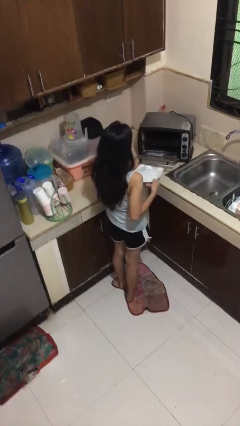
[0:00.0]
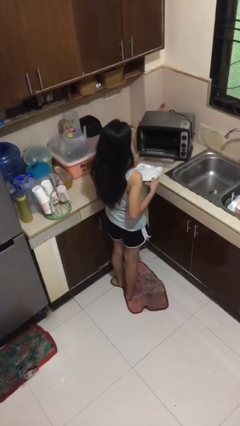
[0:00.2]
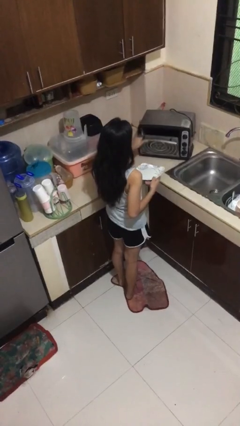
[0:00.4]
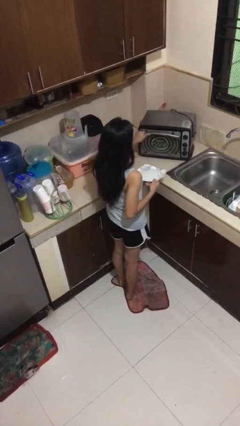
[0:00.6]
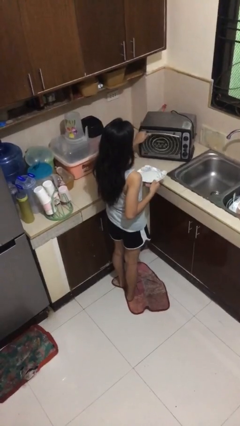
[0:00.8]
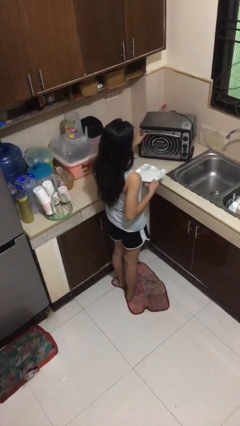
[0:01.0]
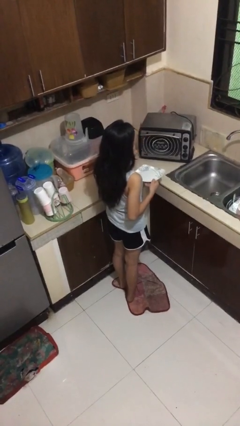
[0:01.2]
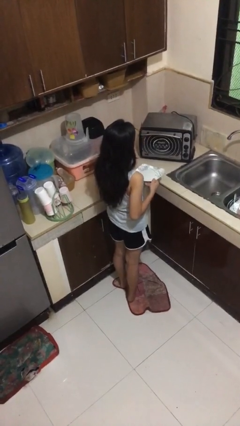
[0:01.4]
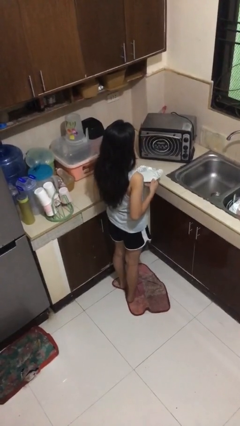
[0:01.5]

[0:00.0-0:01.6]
person closes microwave

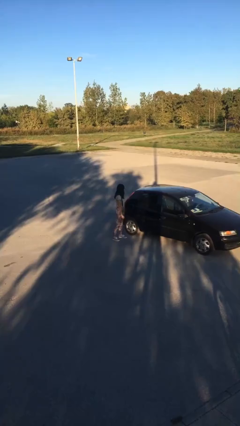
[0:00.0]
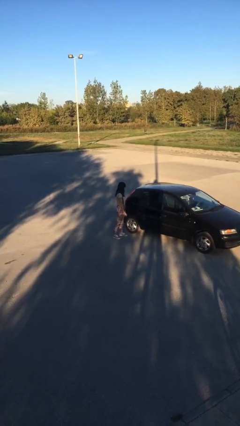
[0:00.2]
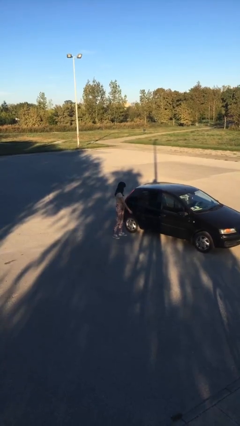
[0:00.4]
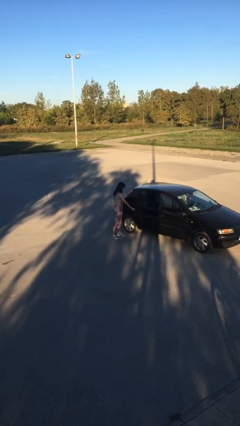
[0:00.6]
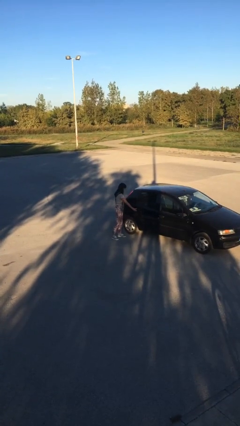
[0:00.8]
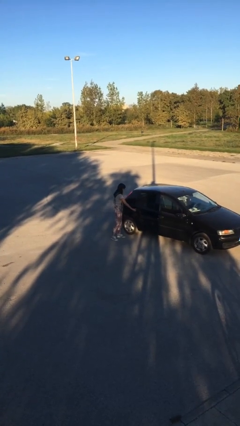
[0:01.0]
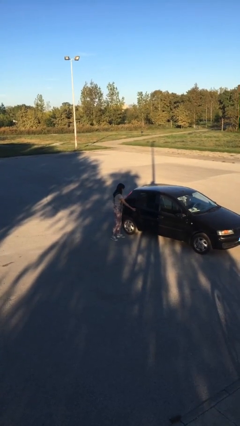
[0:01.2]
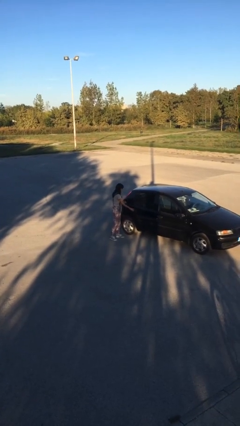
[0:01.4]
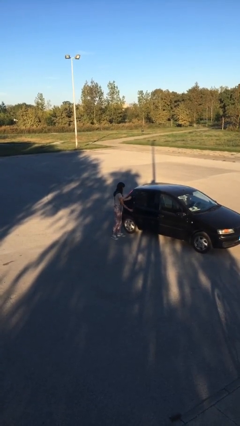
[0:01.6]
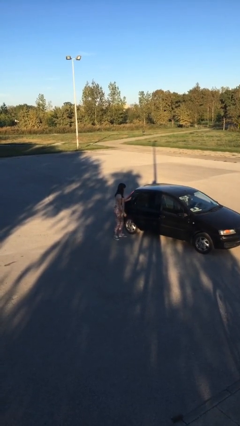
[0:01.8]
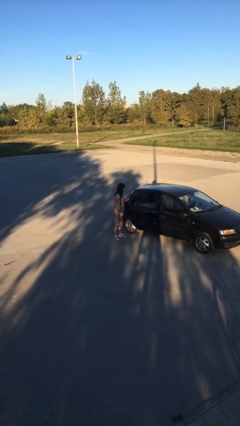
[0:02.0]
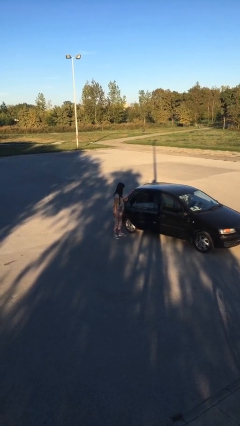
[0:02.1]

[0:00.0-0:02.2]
person opens car door

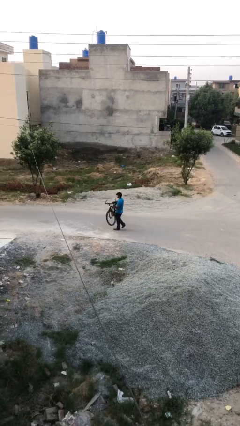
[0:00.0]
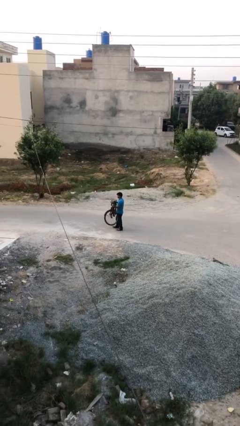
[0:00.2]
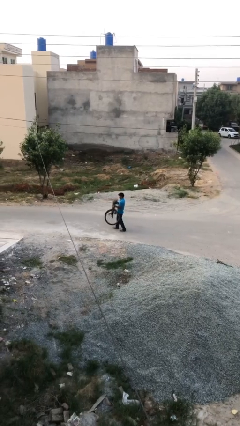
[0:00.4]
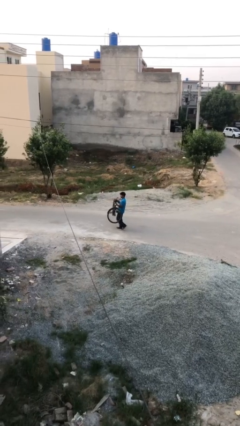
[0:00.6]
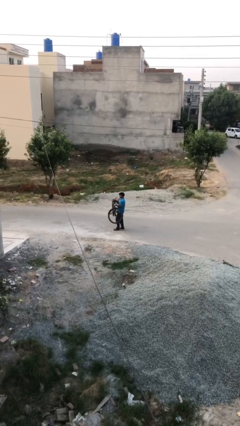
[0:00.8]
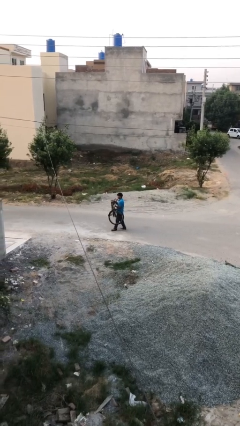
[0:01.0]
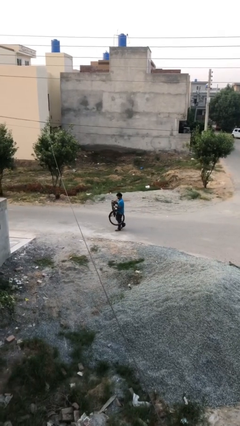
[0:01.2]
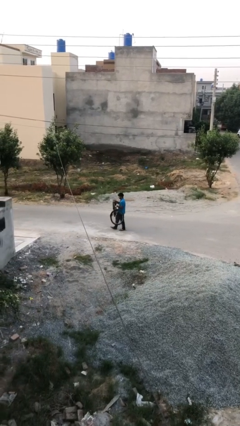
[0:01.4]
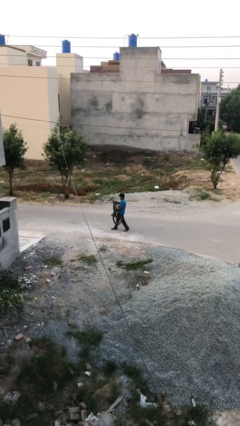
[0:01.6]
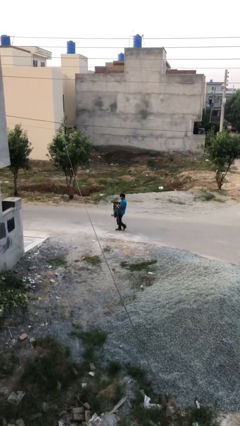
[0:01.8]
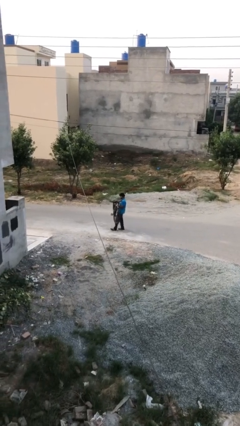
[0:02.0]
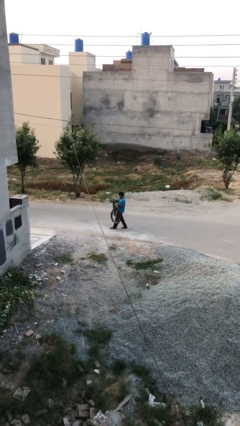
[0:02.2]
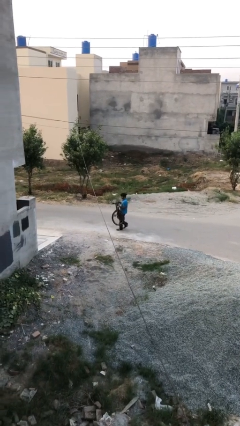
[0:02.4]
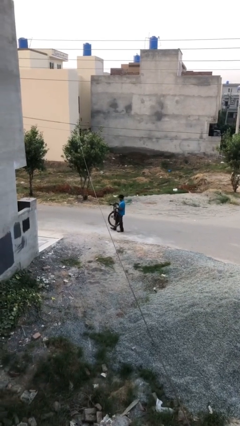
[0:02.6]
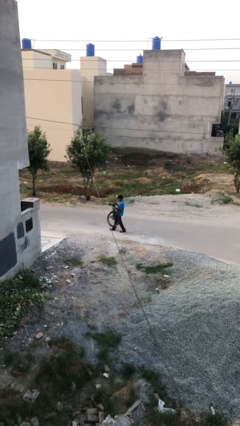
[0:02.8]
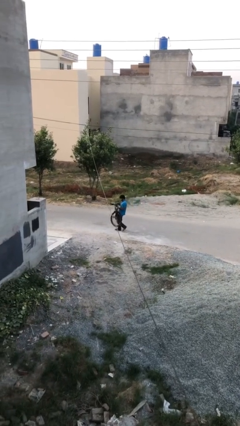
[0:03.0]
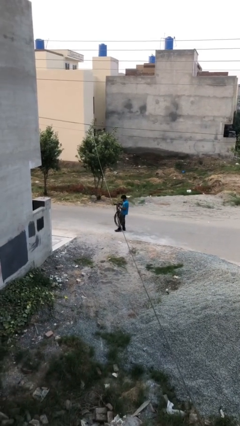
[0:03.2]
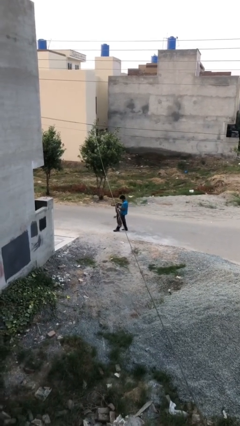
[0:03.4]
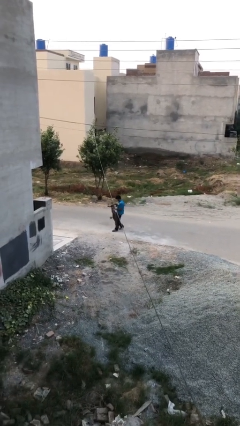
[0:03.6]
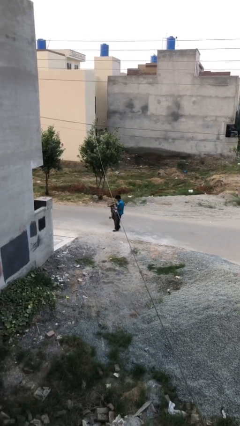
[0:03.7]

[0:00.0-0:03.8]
person carries heavy object

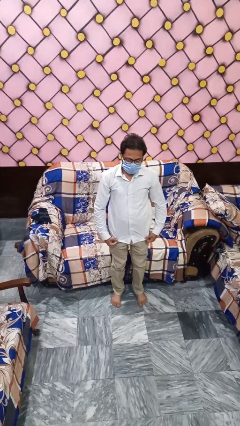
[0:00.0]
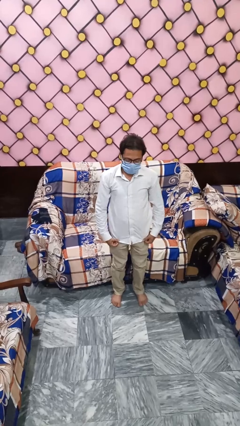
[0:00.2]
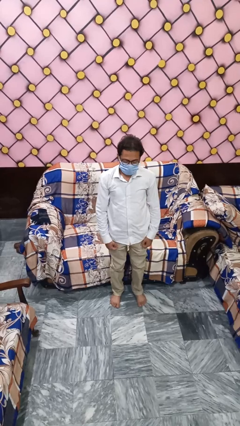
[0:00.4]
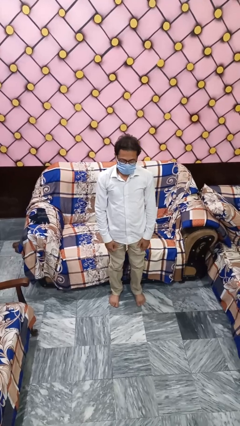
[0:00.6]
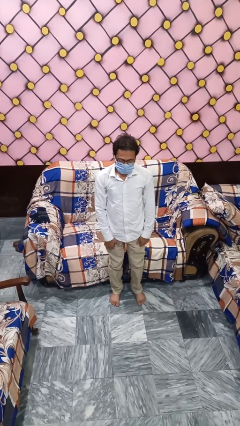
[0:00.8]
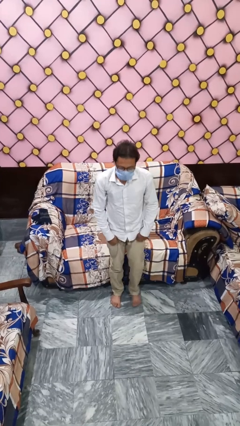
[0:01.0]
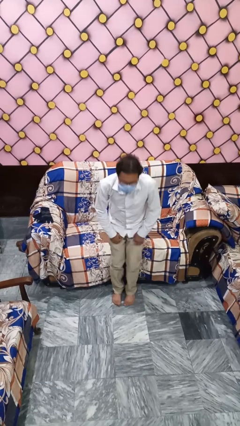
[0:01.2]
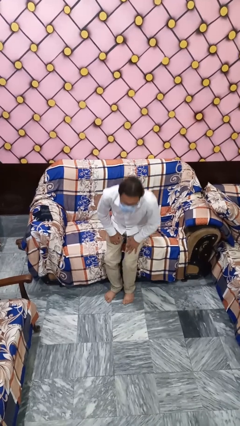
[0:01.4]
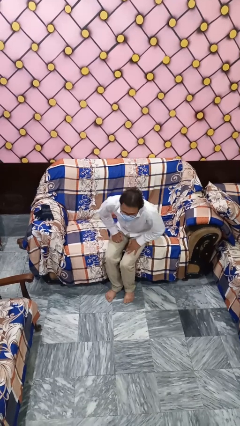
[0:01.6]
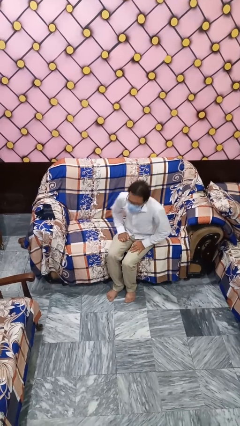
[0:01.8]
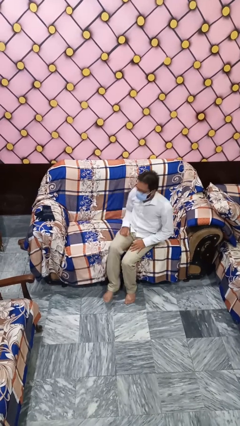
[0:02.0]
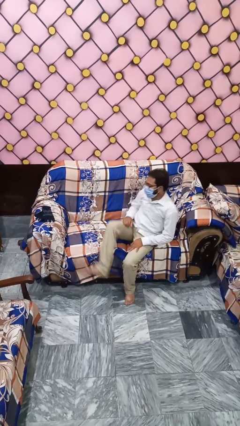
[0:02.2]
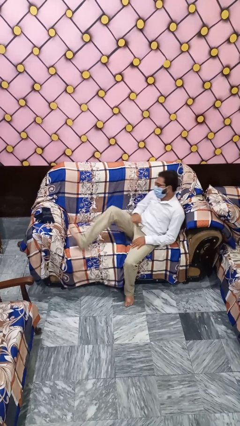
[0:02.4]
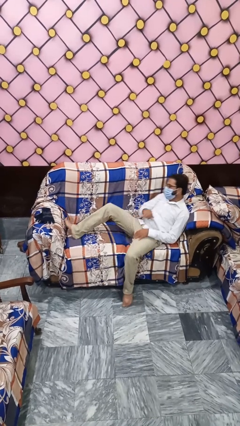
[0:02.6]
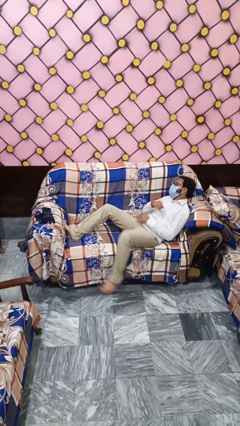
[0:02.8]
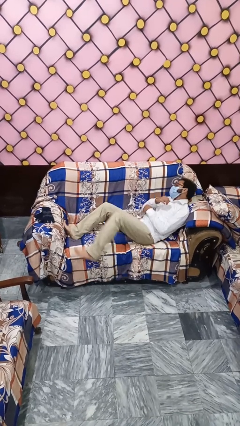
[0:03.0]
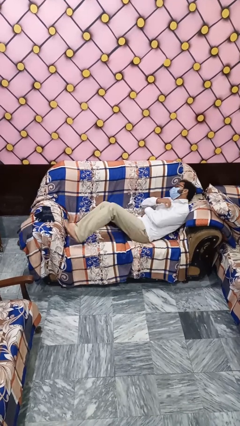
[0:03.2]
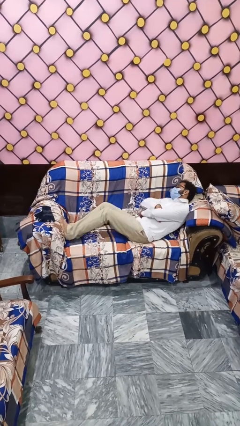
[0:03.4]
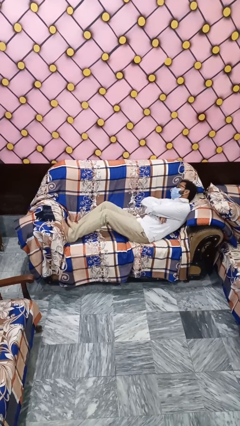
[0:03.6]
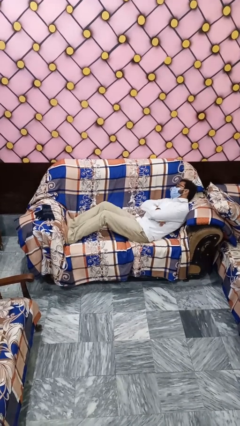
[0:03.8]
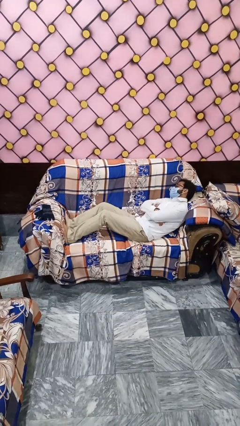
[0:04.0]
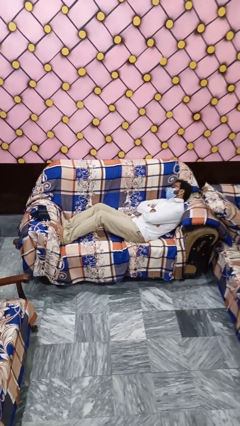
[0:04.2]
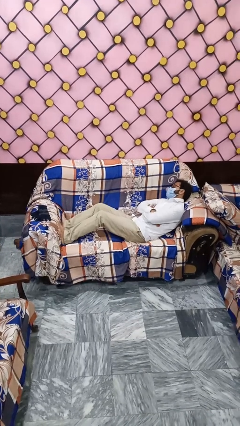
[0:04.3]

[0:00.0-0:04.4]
person lies down on couch

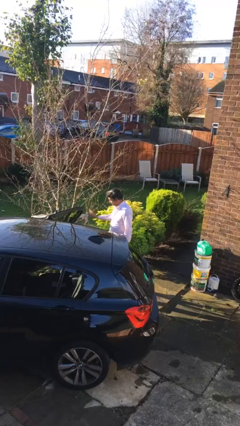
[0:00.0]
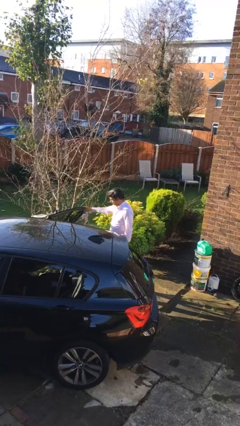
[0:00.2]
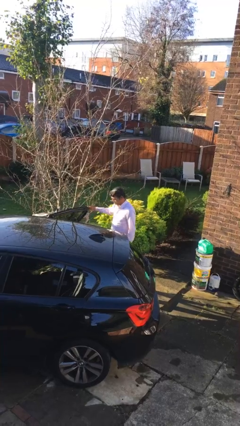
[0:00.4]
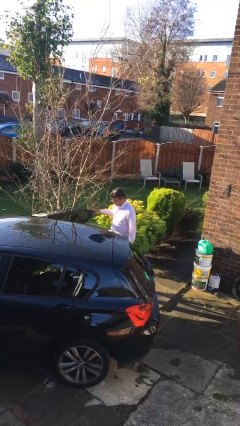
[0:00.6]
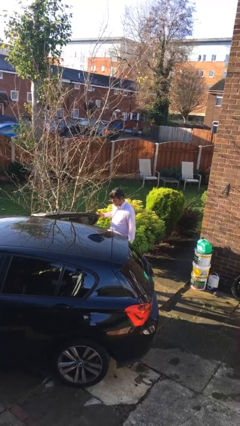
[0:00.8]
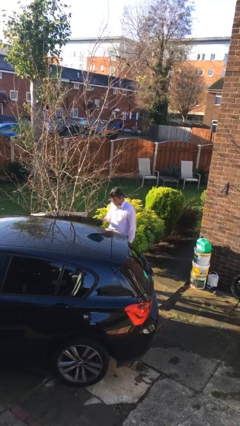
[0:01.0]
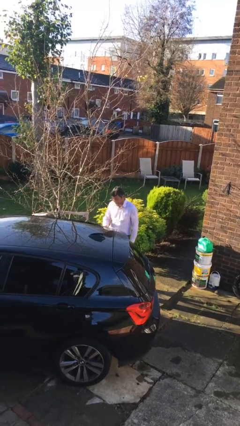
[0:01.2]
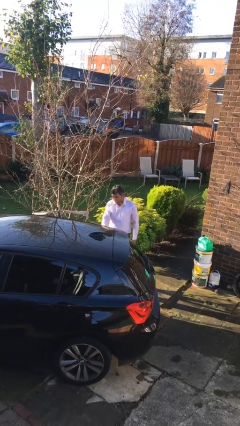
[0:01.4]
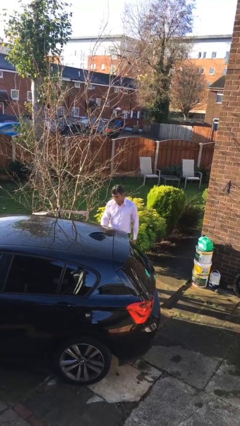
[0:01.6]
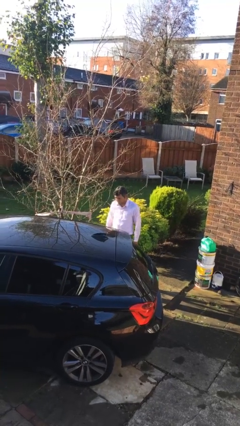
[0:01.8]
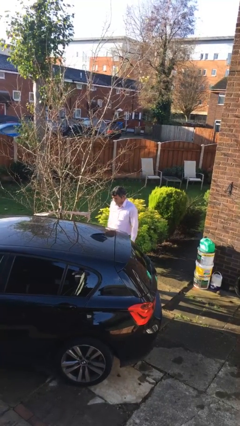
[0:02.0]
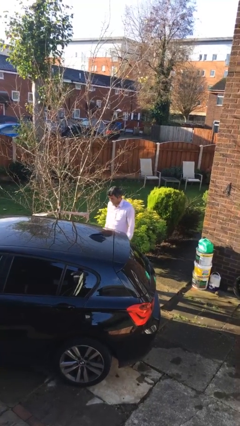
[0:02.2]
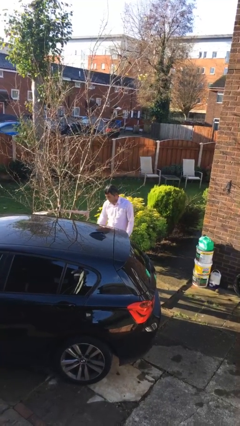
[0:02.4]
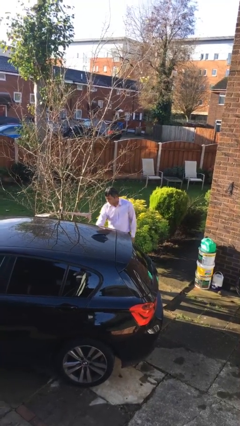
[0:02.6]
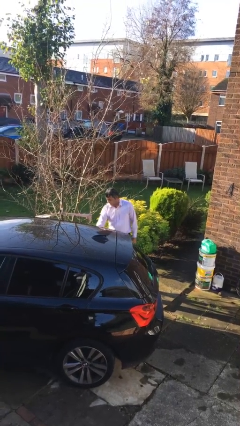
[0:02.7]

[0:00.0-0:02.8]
person closes car door

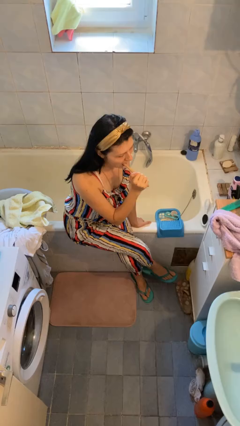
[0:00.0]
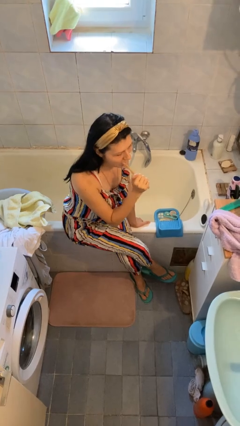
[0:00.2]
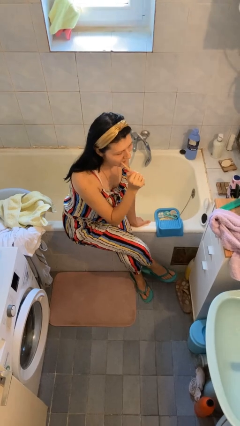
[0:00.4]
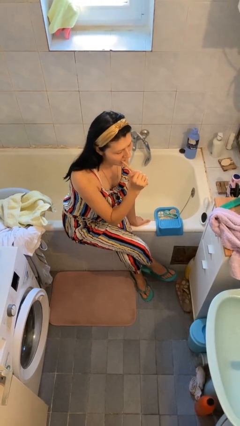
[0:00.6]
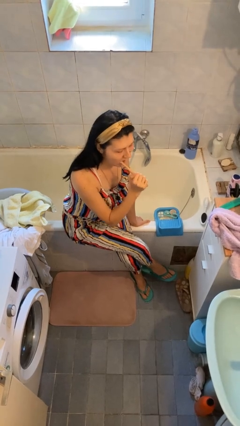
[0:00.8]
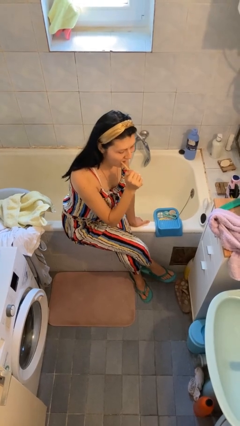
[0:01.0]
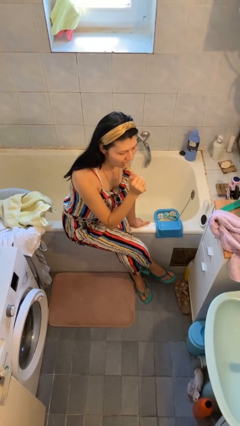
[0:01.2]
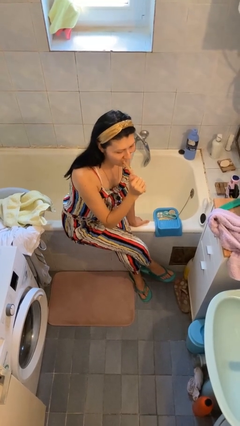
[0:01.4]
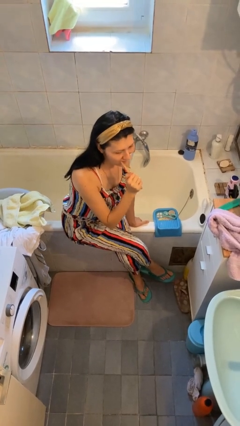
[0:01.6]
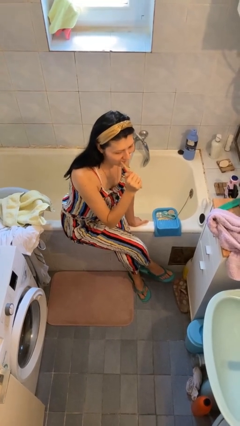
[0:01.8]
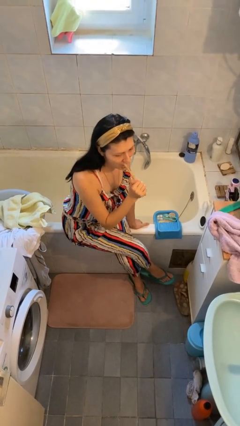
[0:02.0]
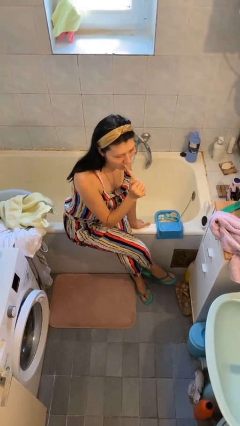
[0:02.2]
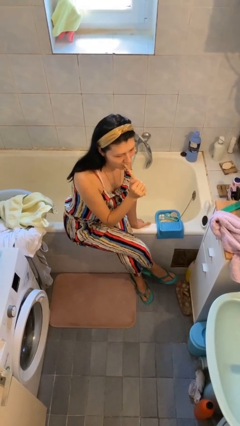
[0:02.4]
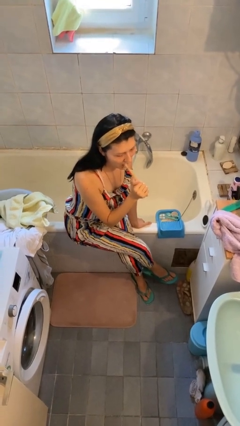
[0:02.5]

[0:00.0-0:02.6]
person brushes teeth
